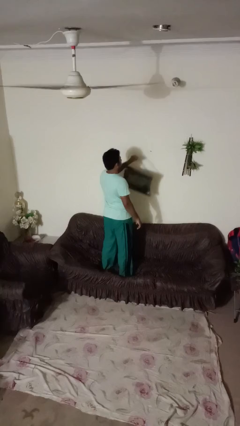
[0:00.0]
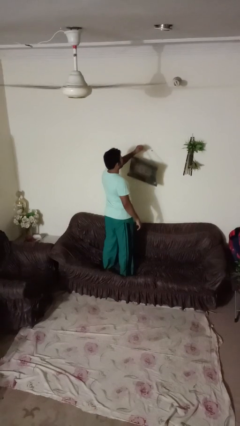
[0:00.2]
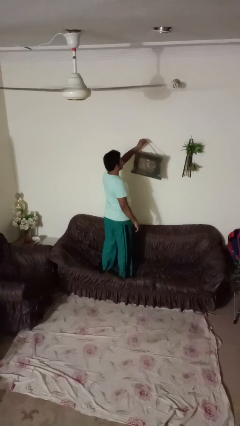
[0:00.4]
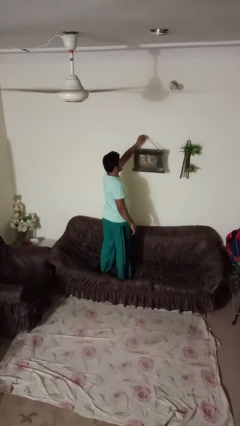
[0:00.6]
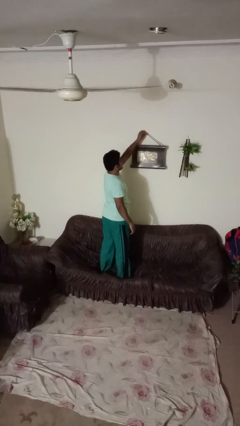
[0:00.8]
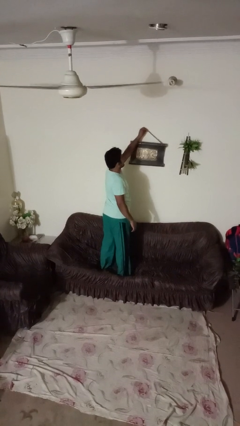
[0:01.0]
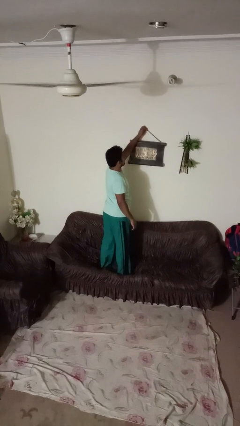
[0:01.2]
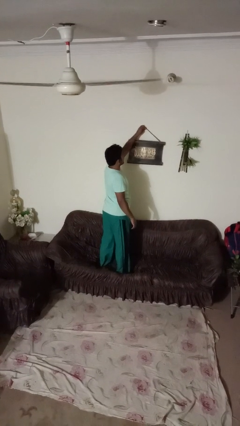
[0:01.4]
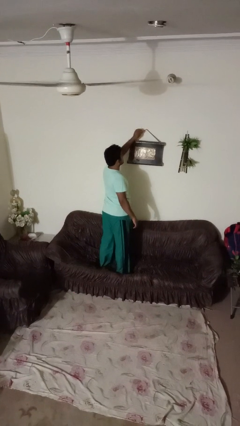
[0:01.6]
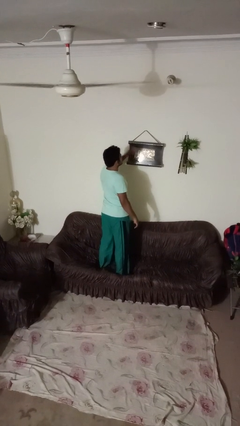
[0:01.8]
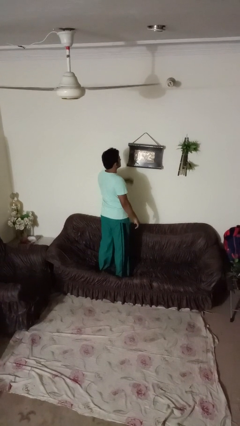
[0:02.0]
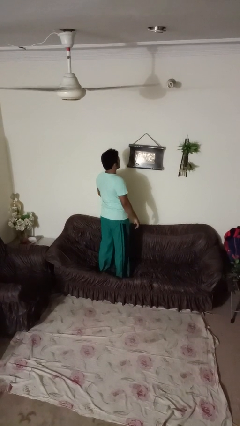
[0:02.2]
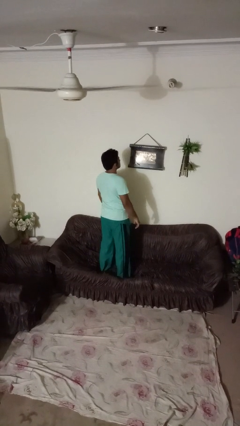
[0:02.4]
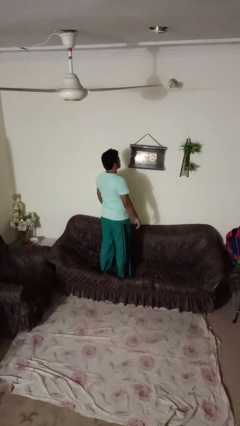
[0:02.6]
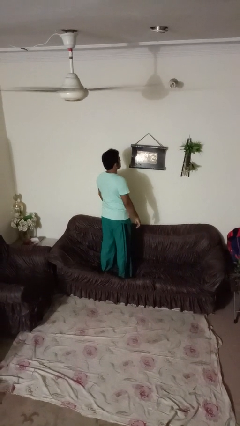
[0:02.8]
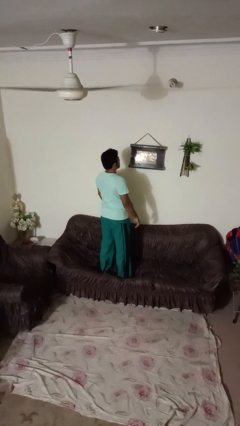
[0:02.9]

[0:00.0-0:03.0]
person puts up picture frame

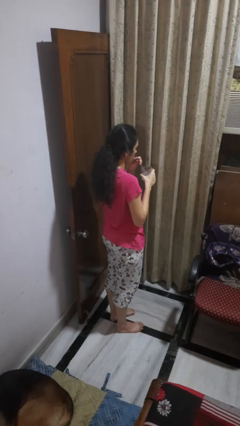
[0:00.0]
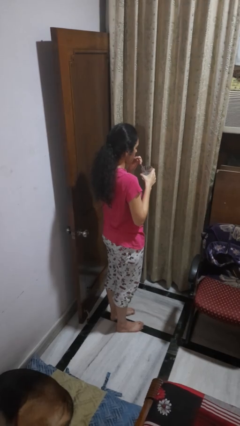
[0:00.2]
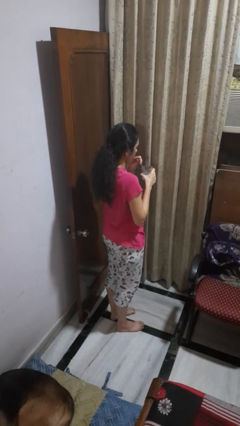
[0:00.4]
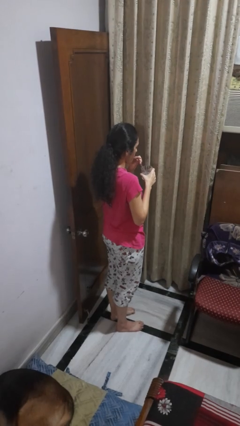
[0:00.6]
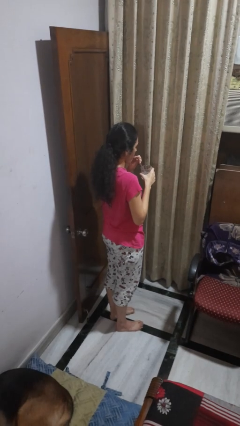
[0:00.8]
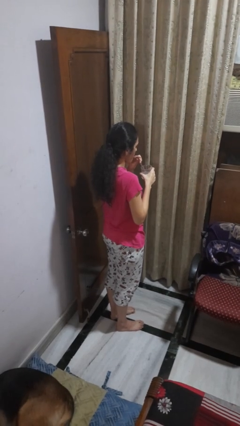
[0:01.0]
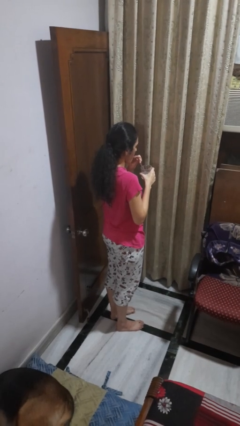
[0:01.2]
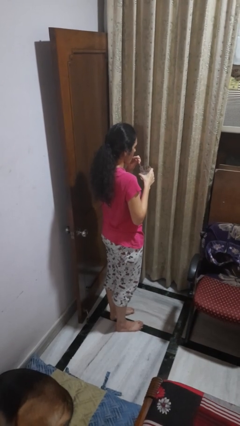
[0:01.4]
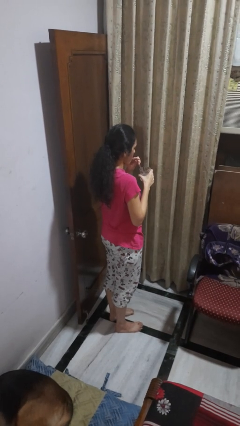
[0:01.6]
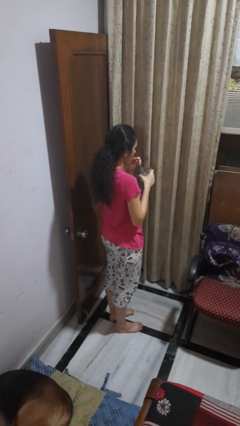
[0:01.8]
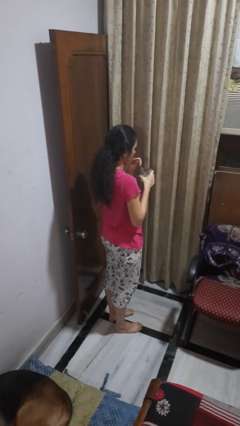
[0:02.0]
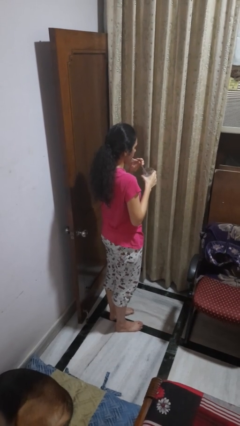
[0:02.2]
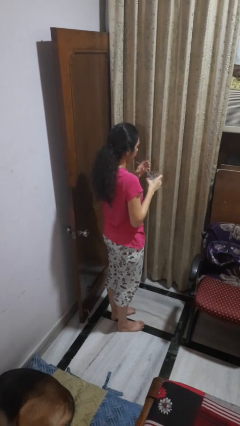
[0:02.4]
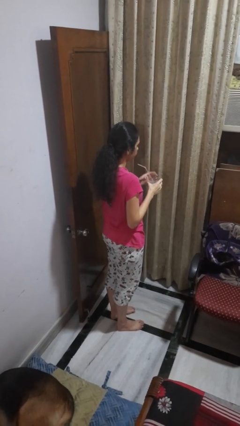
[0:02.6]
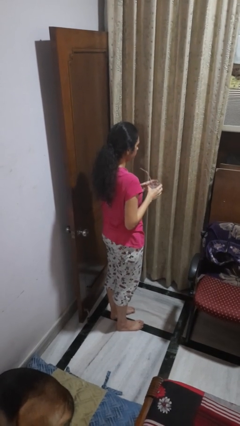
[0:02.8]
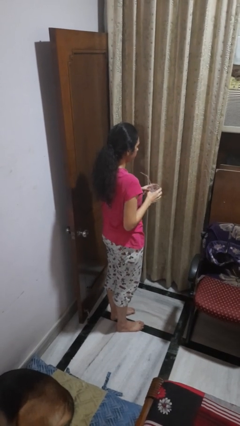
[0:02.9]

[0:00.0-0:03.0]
person drinks from straw

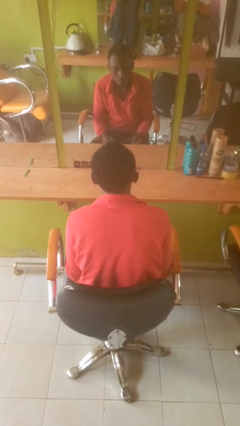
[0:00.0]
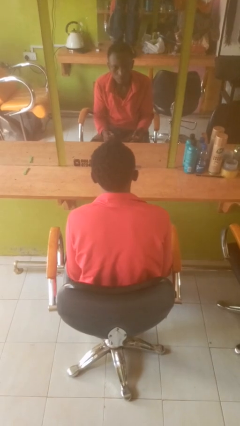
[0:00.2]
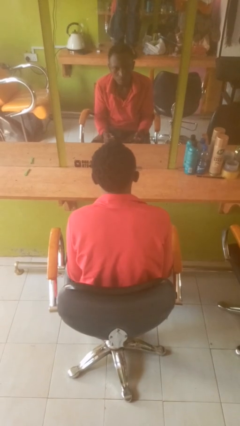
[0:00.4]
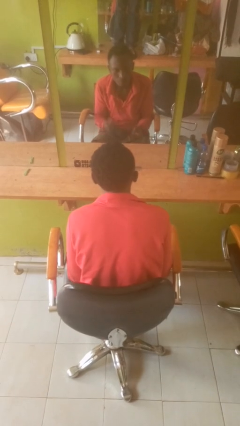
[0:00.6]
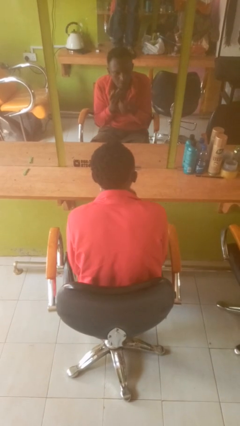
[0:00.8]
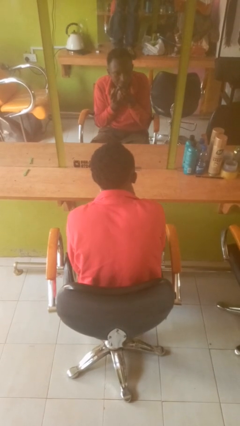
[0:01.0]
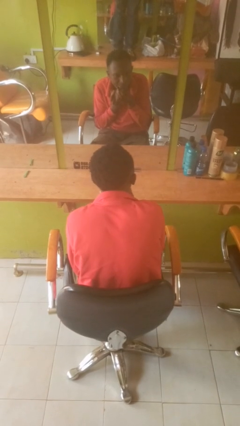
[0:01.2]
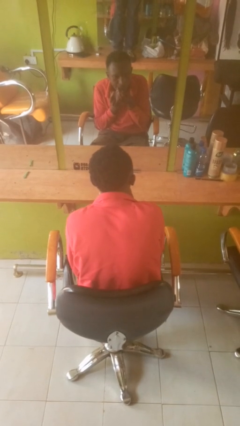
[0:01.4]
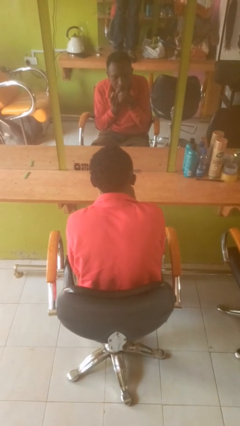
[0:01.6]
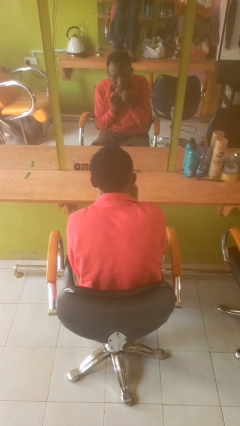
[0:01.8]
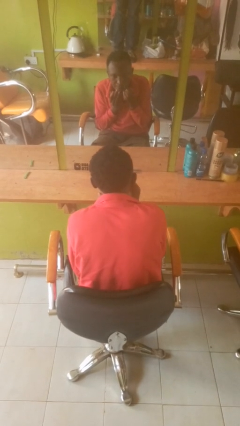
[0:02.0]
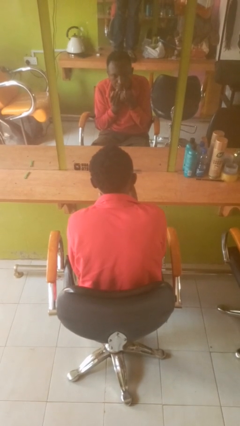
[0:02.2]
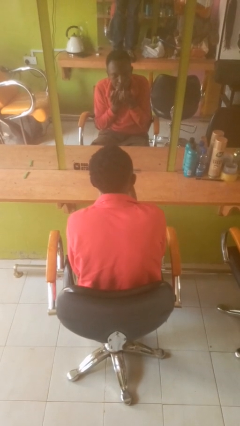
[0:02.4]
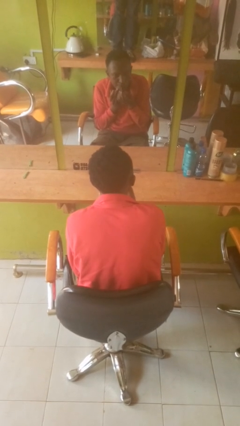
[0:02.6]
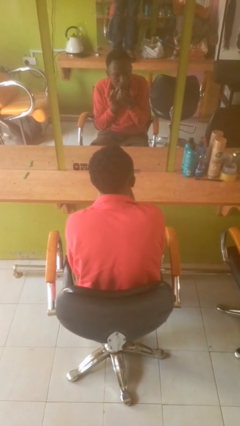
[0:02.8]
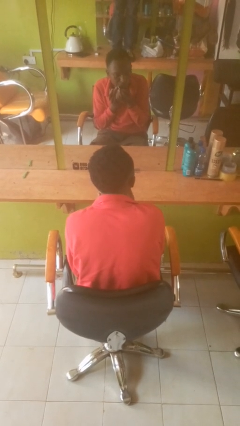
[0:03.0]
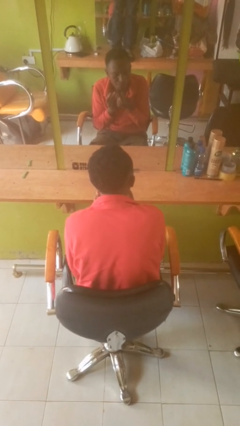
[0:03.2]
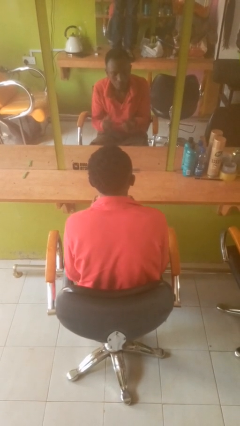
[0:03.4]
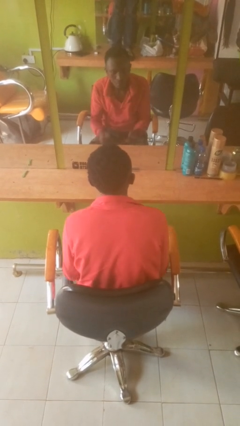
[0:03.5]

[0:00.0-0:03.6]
person applies lip makeup

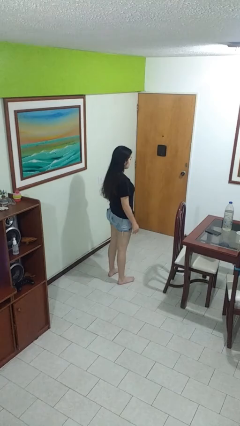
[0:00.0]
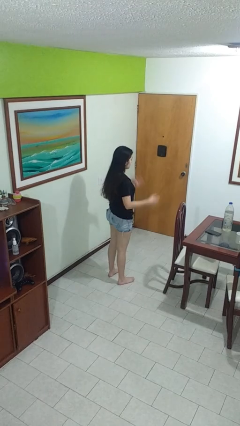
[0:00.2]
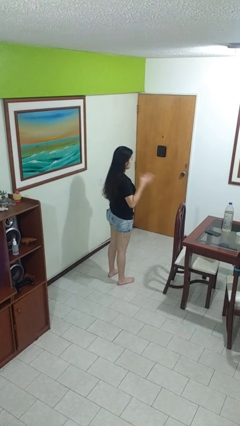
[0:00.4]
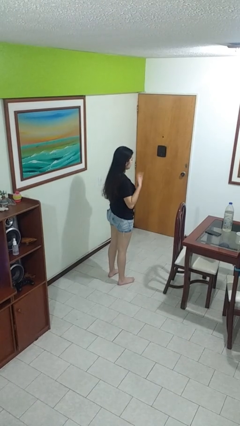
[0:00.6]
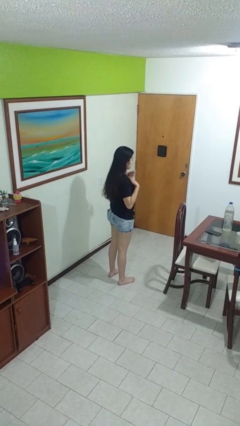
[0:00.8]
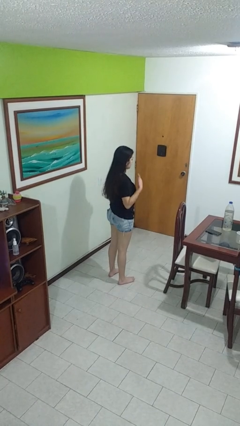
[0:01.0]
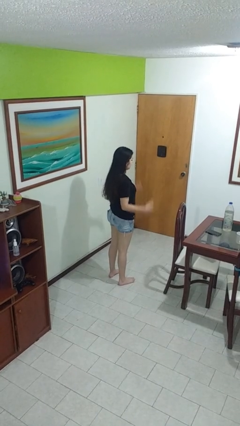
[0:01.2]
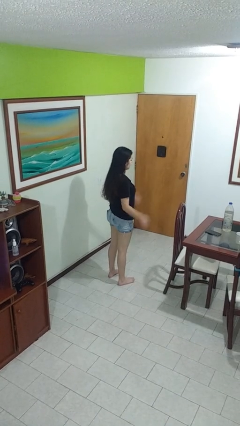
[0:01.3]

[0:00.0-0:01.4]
person drums on chest

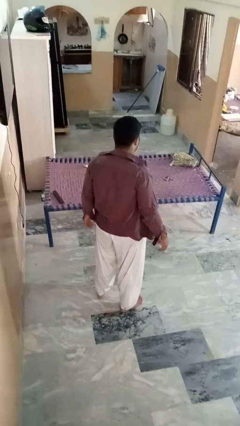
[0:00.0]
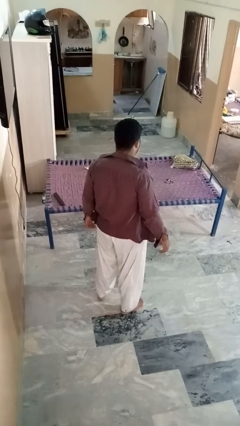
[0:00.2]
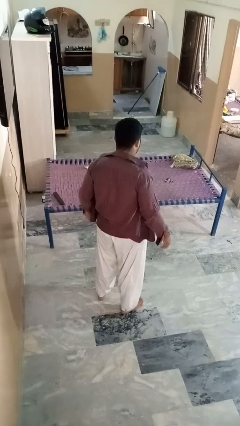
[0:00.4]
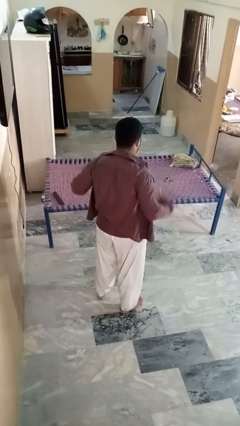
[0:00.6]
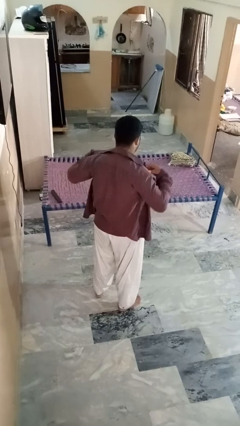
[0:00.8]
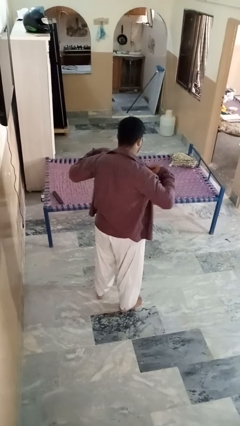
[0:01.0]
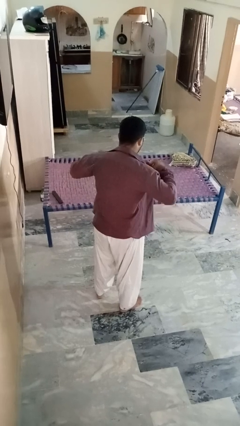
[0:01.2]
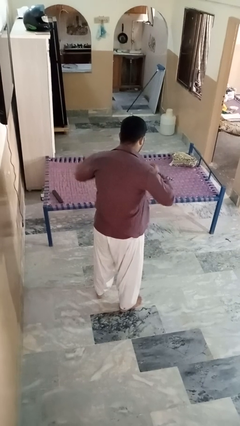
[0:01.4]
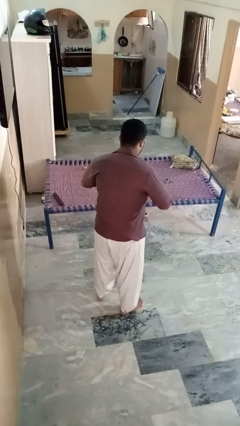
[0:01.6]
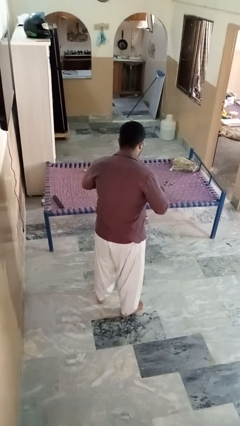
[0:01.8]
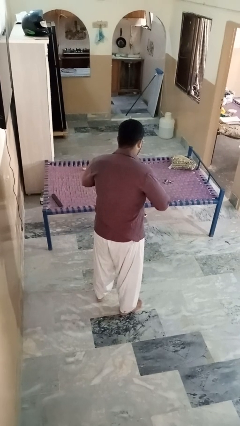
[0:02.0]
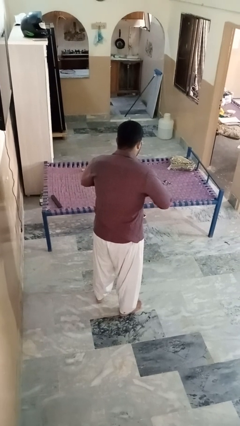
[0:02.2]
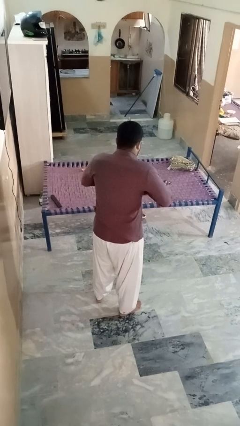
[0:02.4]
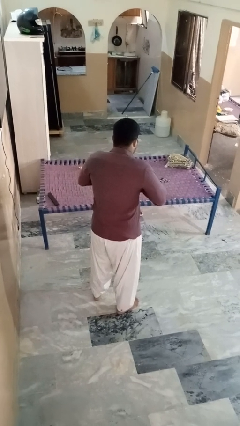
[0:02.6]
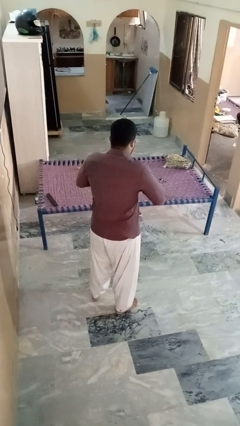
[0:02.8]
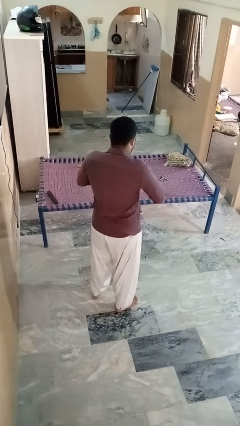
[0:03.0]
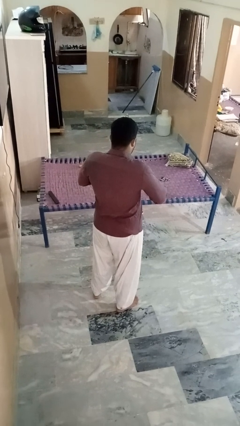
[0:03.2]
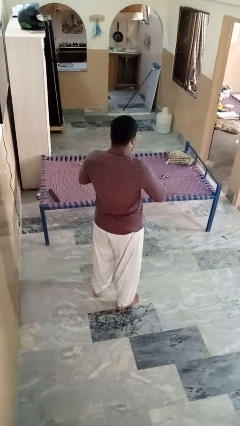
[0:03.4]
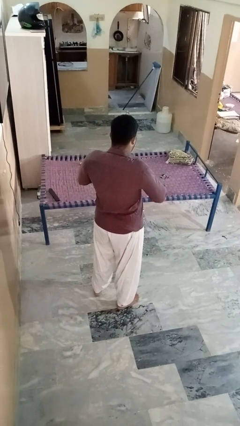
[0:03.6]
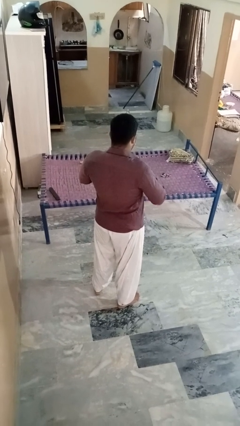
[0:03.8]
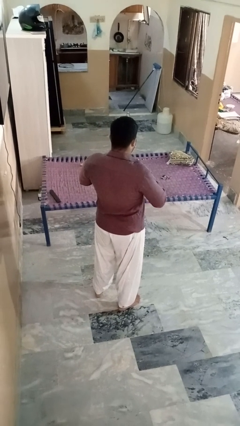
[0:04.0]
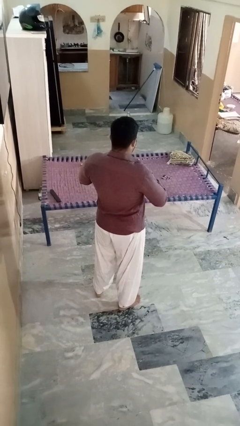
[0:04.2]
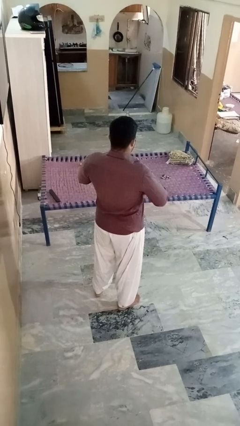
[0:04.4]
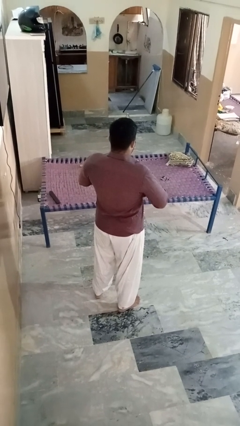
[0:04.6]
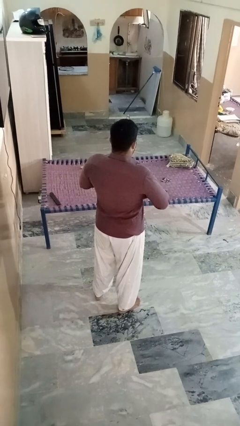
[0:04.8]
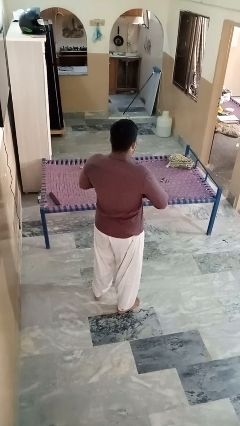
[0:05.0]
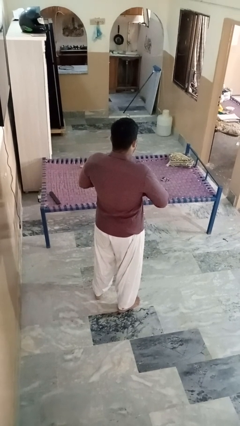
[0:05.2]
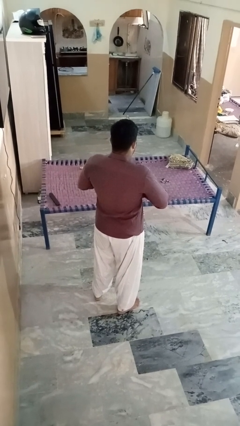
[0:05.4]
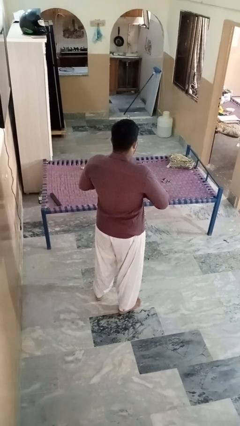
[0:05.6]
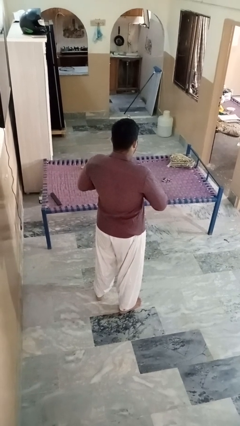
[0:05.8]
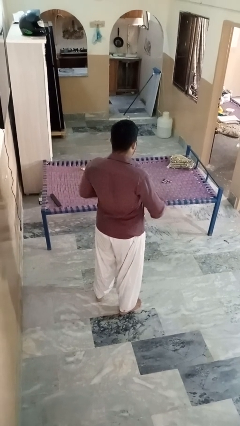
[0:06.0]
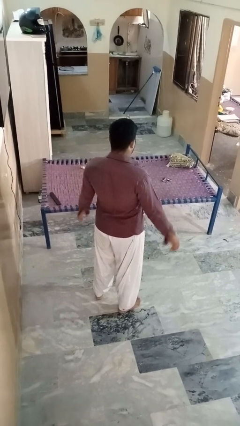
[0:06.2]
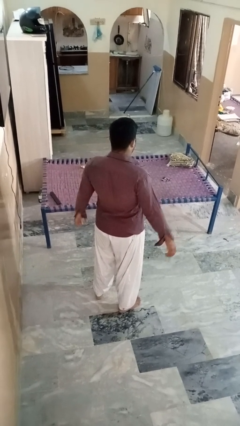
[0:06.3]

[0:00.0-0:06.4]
person buttons shirt

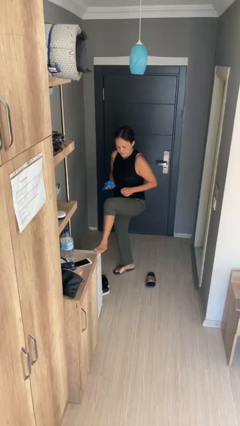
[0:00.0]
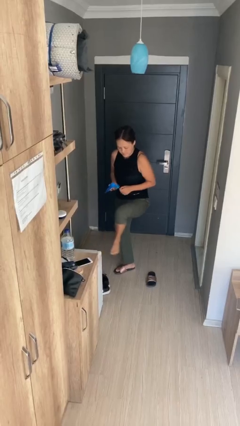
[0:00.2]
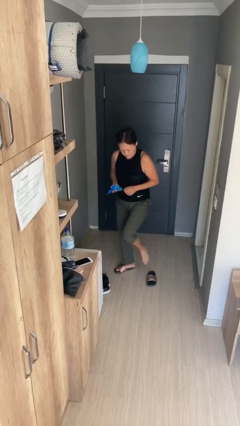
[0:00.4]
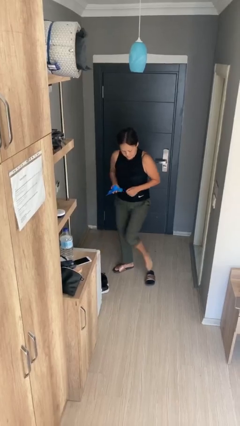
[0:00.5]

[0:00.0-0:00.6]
person applies sunscreen
